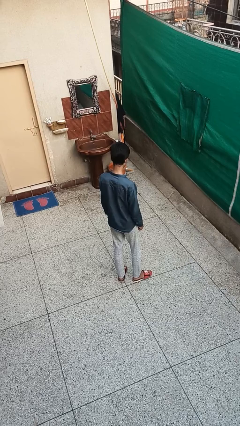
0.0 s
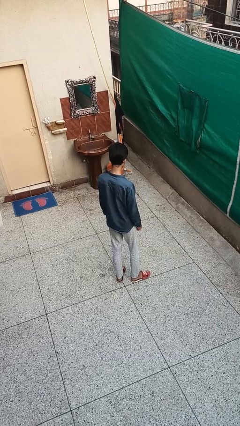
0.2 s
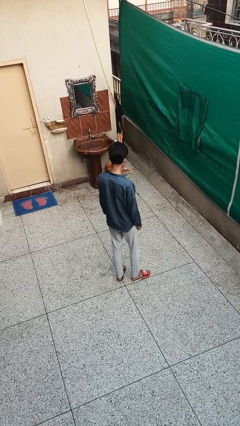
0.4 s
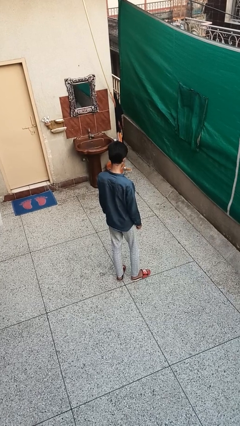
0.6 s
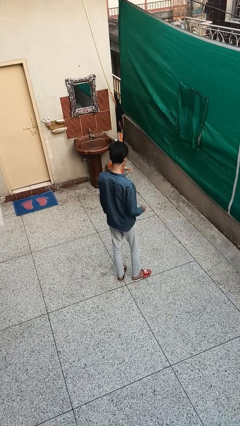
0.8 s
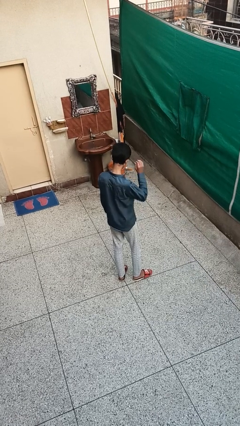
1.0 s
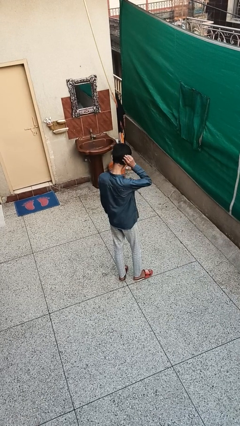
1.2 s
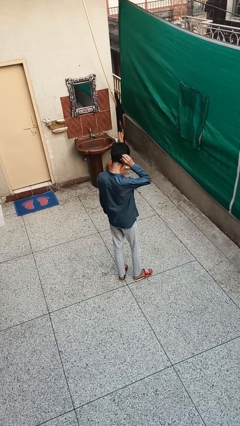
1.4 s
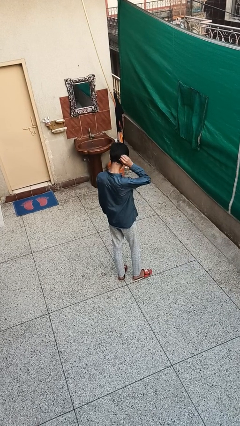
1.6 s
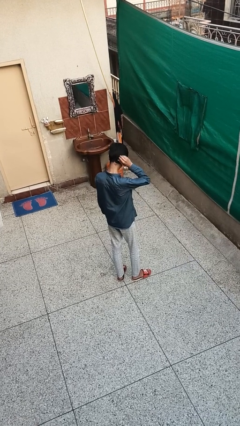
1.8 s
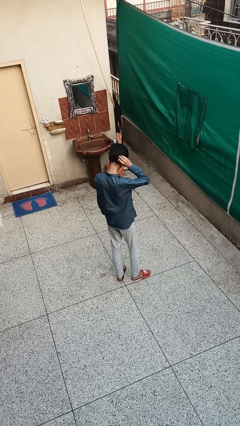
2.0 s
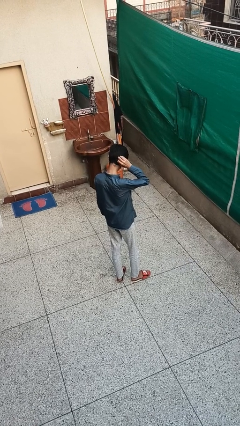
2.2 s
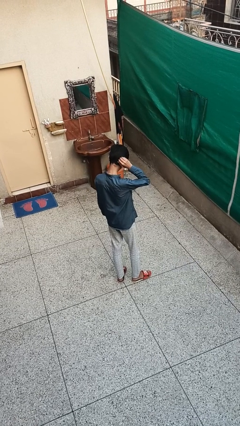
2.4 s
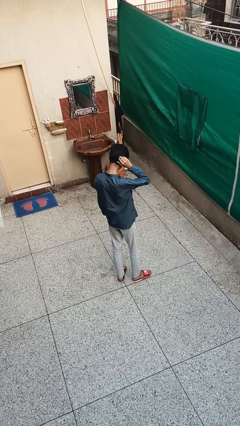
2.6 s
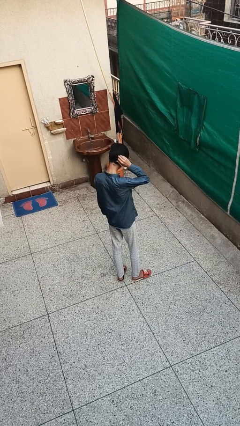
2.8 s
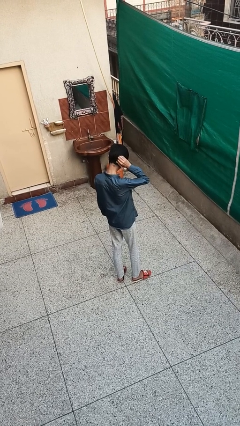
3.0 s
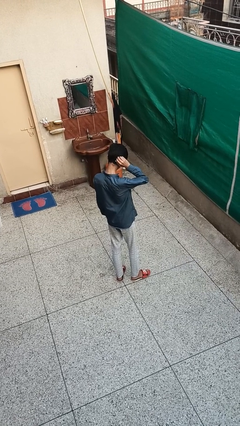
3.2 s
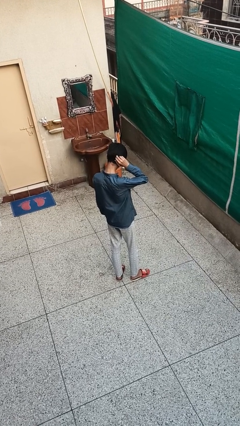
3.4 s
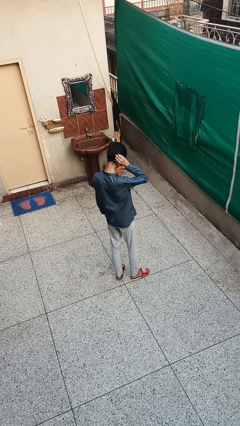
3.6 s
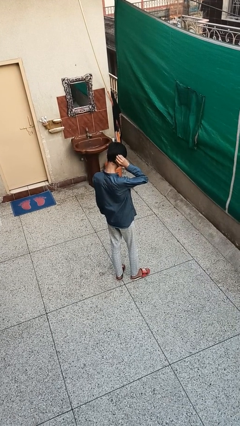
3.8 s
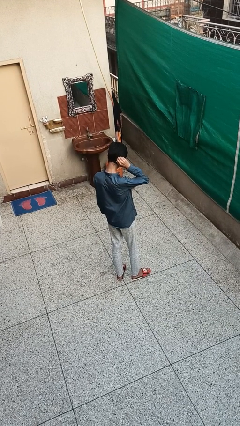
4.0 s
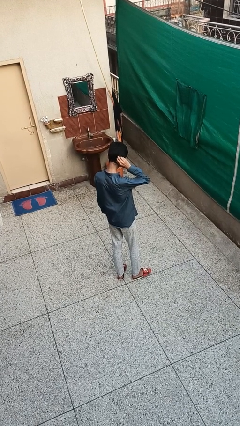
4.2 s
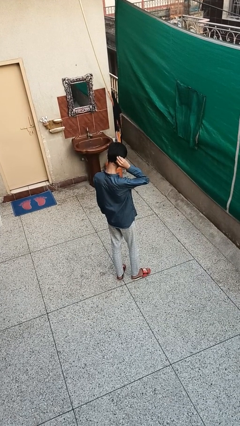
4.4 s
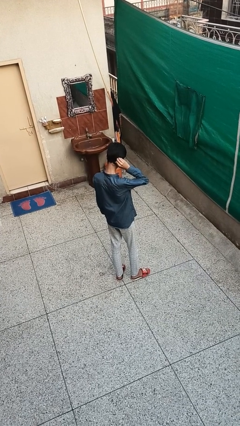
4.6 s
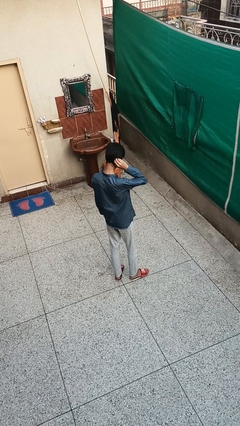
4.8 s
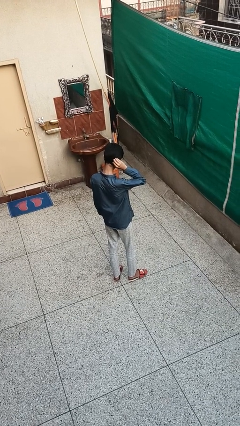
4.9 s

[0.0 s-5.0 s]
person scratches face

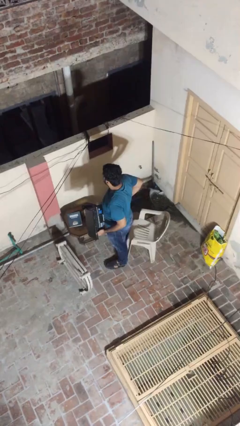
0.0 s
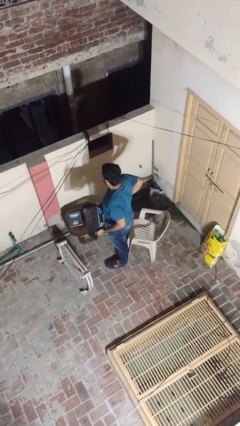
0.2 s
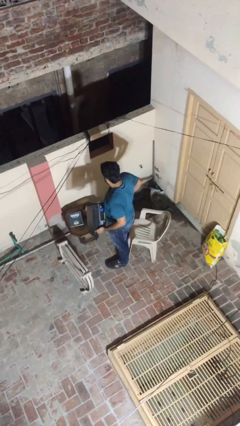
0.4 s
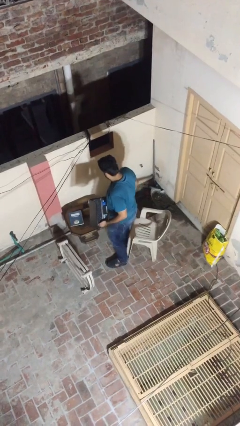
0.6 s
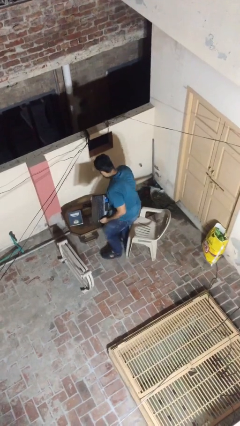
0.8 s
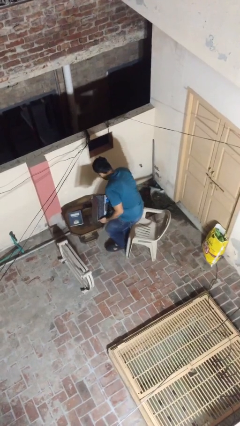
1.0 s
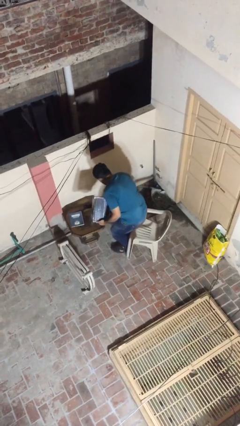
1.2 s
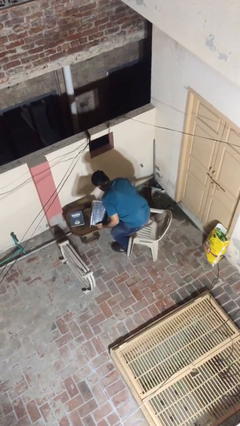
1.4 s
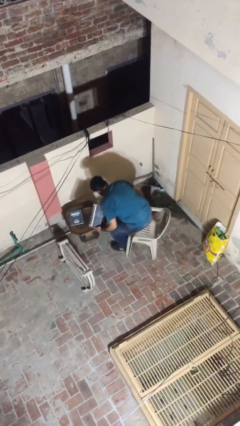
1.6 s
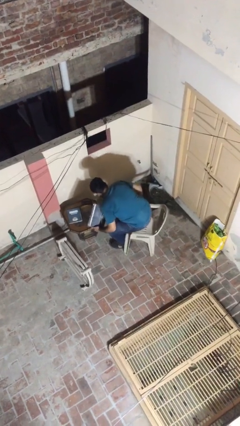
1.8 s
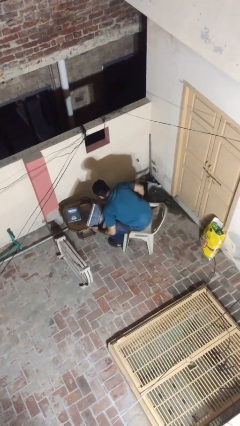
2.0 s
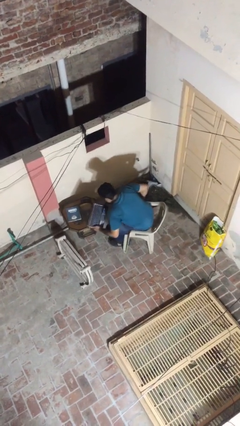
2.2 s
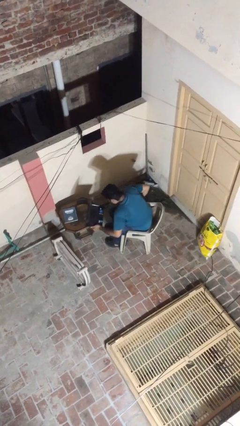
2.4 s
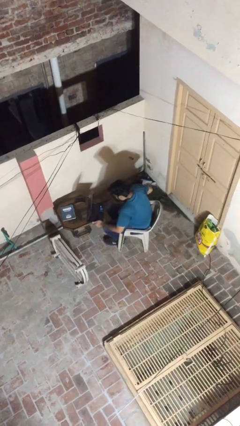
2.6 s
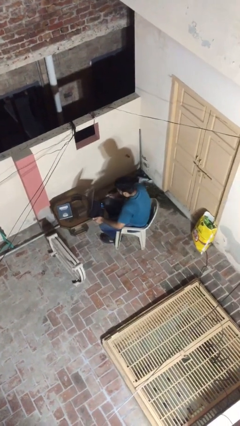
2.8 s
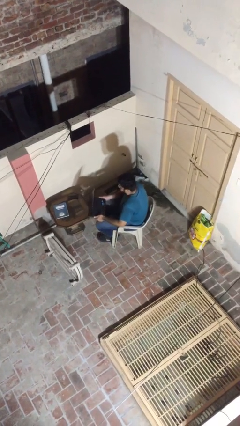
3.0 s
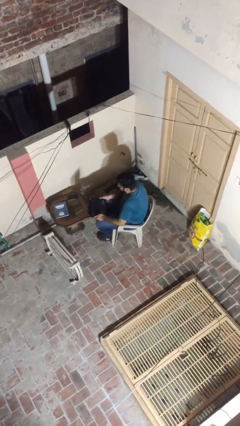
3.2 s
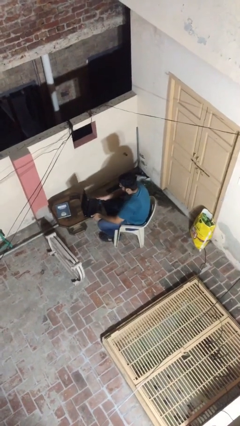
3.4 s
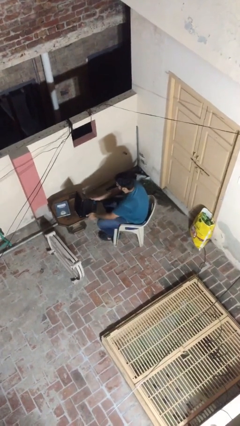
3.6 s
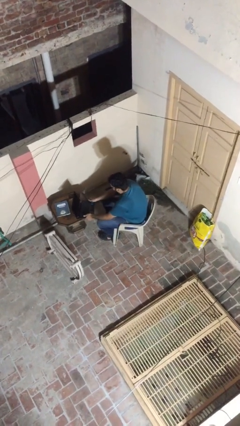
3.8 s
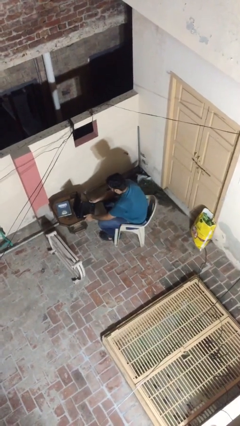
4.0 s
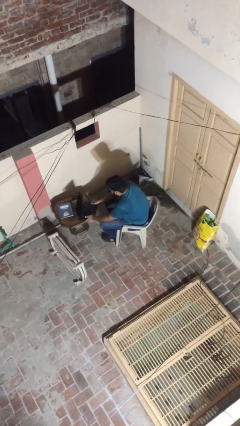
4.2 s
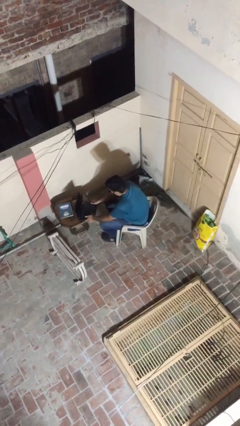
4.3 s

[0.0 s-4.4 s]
person sits down

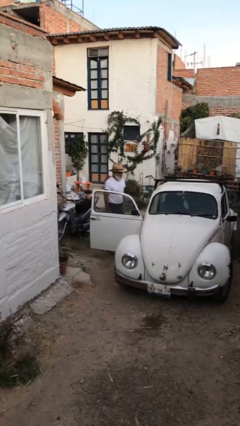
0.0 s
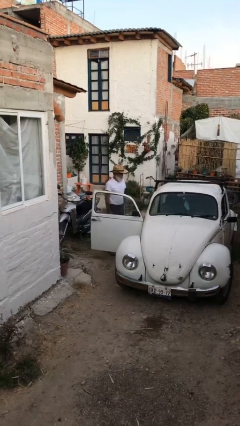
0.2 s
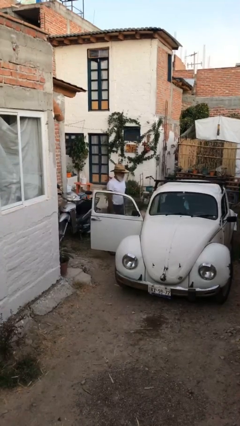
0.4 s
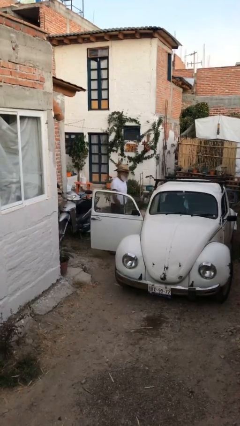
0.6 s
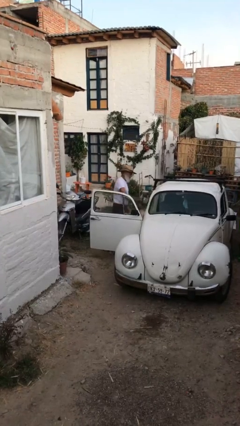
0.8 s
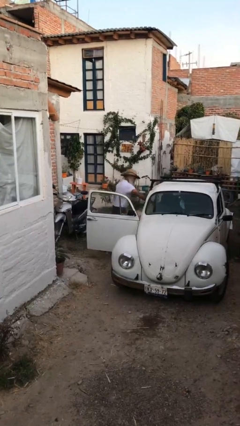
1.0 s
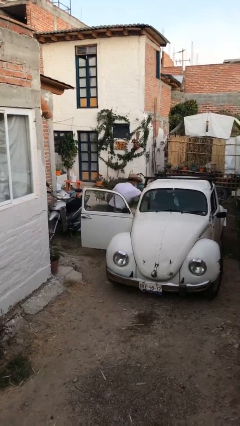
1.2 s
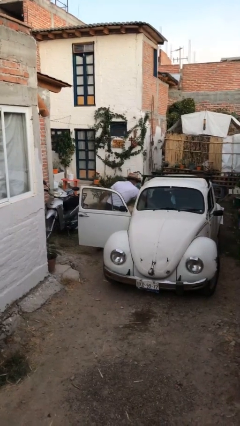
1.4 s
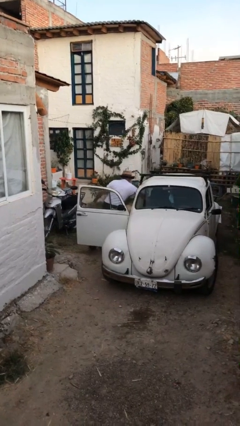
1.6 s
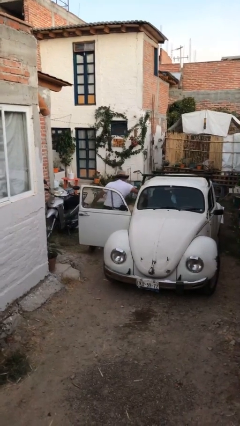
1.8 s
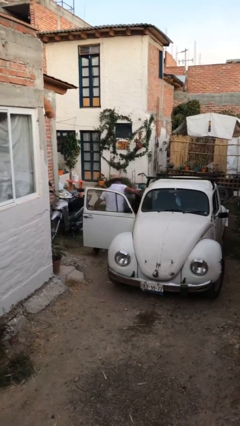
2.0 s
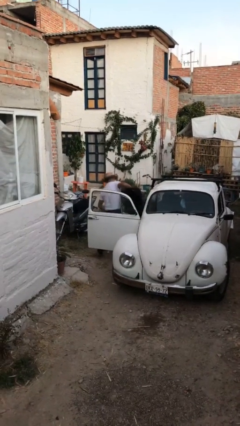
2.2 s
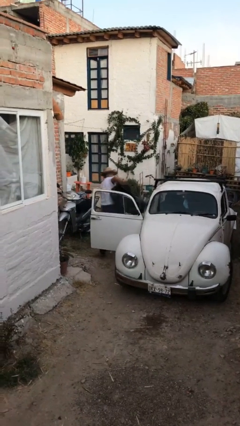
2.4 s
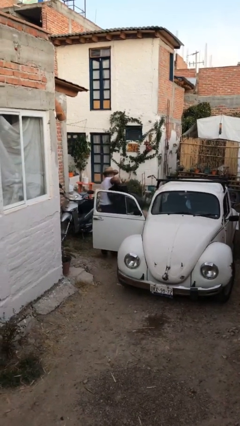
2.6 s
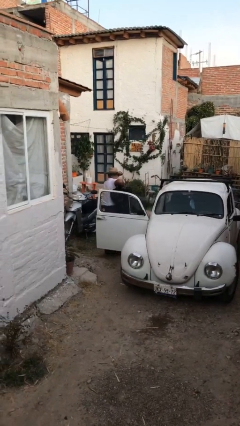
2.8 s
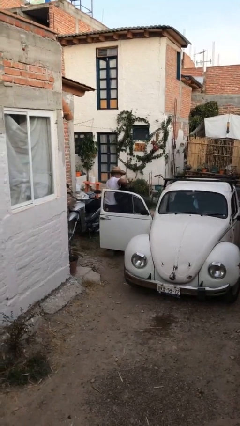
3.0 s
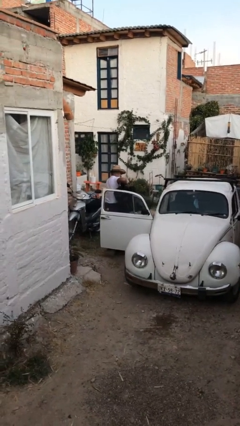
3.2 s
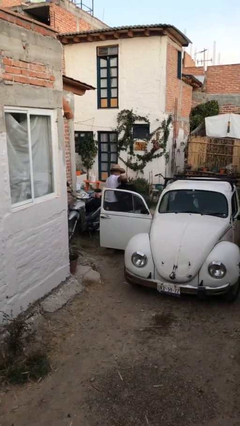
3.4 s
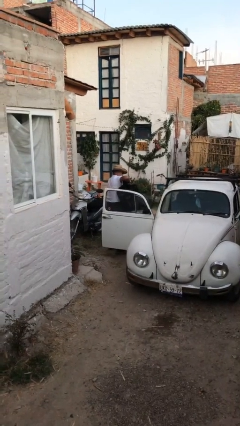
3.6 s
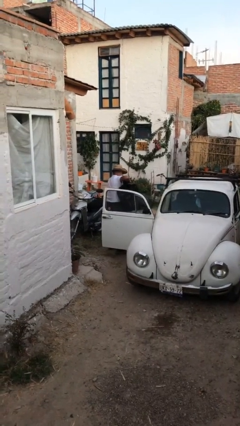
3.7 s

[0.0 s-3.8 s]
person unloads car

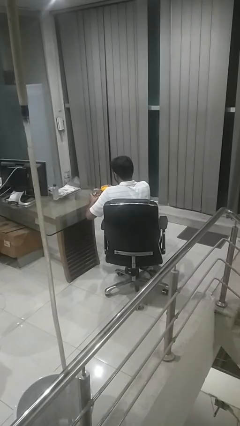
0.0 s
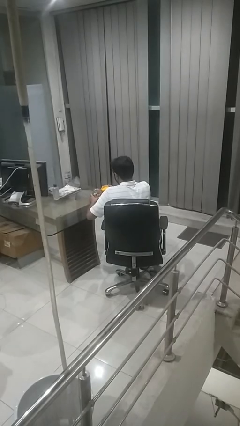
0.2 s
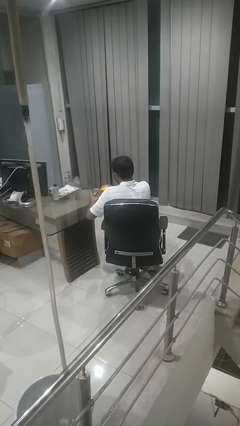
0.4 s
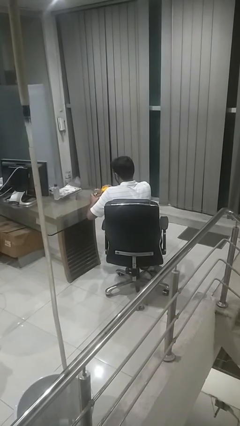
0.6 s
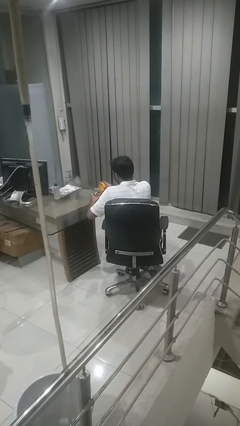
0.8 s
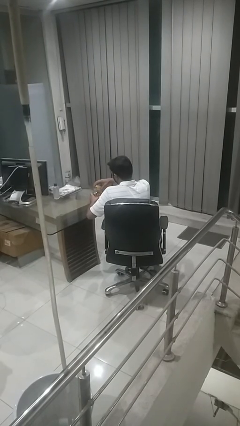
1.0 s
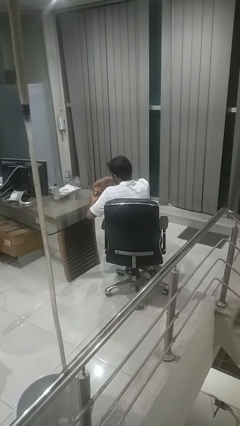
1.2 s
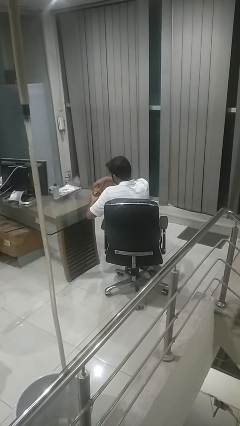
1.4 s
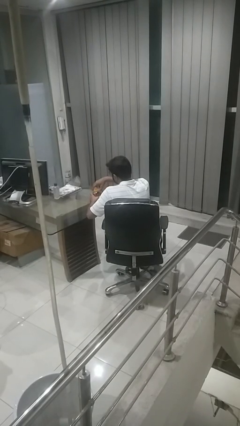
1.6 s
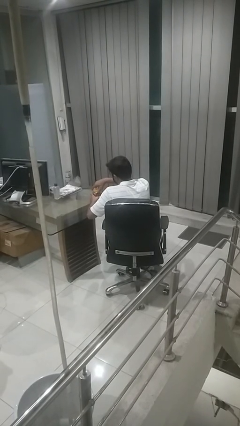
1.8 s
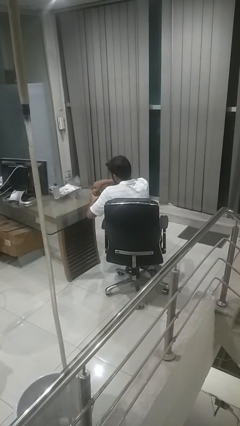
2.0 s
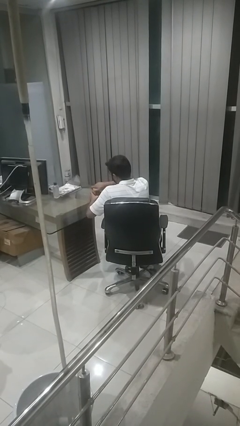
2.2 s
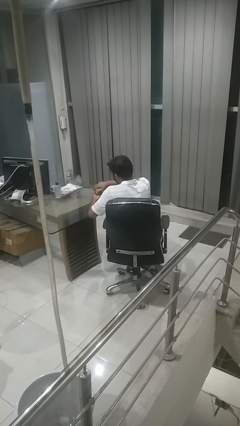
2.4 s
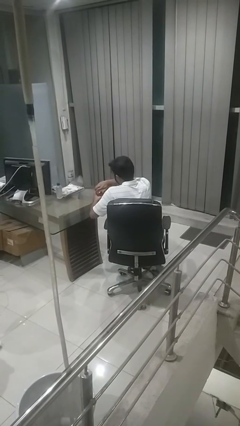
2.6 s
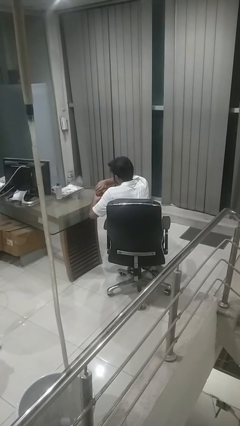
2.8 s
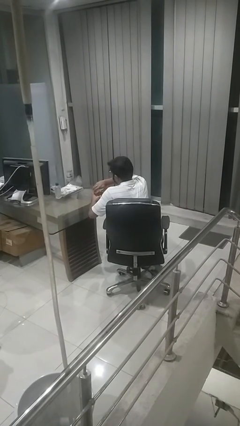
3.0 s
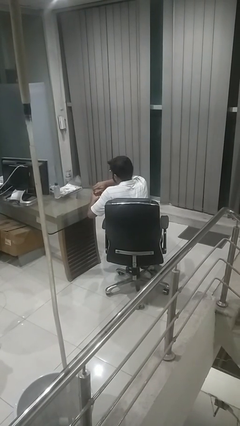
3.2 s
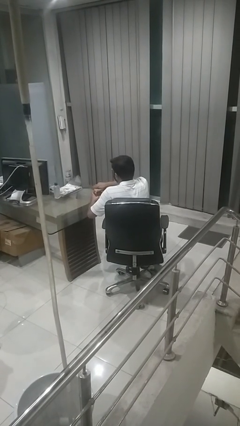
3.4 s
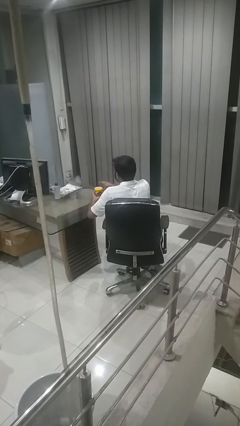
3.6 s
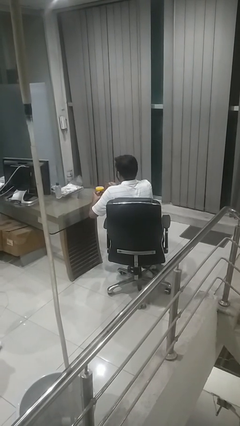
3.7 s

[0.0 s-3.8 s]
person closes jar

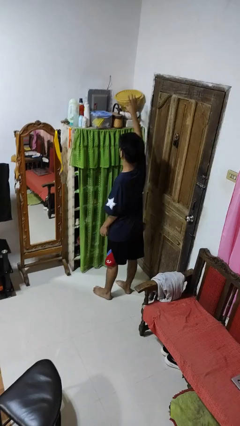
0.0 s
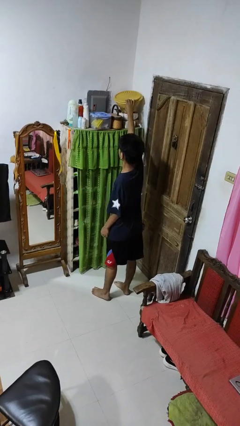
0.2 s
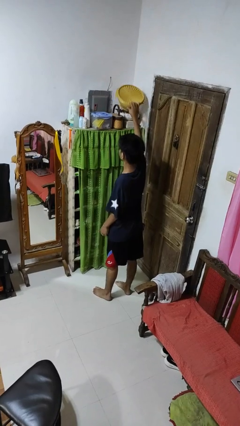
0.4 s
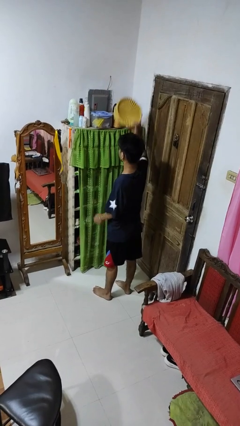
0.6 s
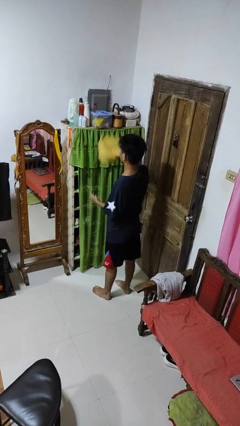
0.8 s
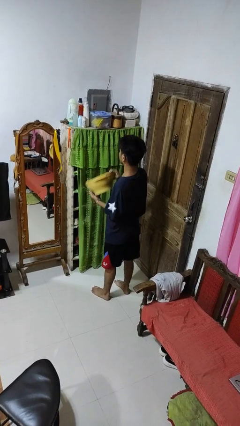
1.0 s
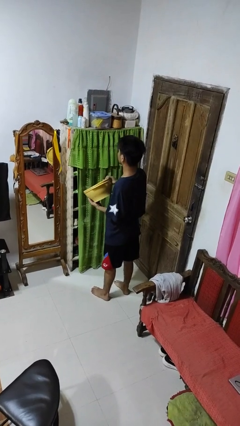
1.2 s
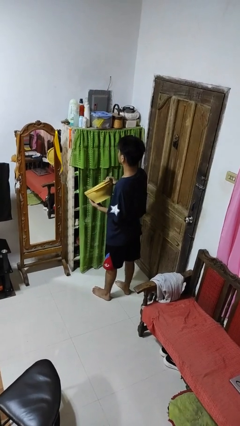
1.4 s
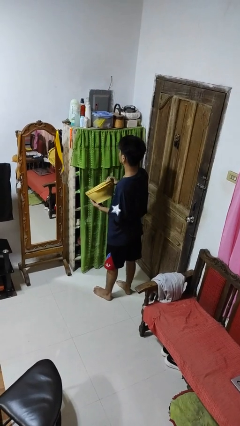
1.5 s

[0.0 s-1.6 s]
person picks up object from shelf
